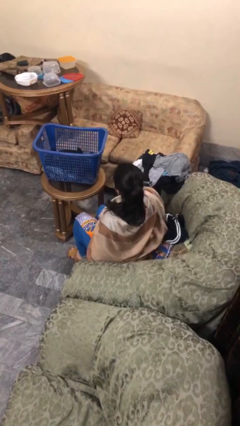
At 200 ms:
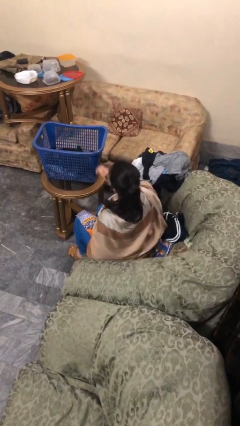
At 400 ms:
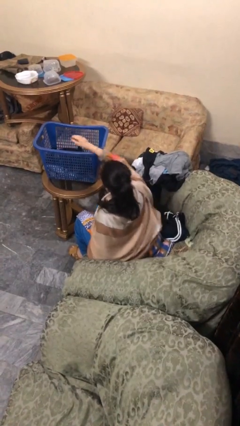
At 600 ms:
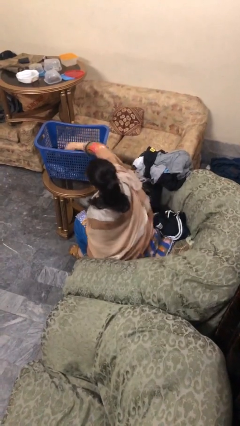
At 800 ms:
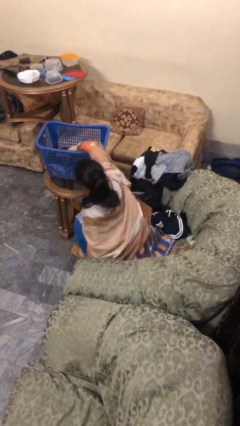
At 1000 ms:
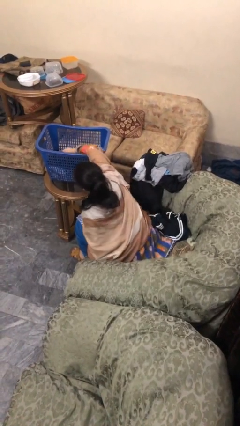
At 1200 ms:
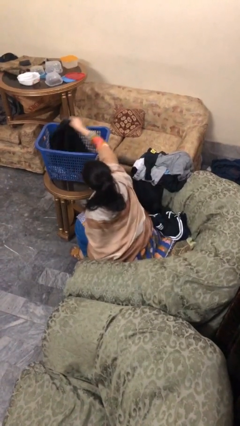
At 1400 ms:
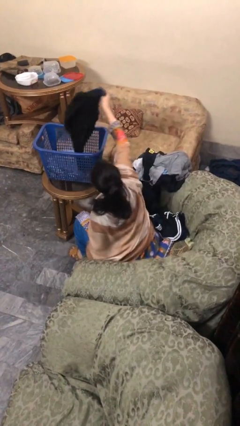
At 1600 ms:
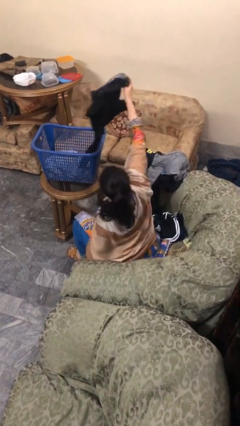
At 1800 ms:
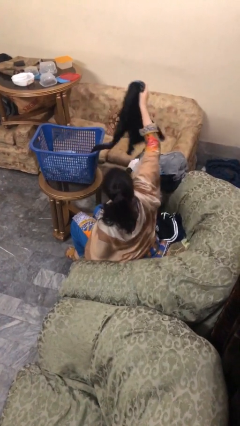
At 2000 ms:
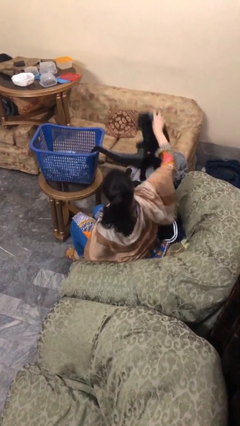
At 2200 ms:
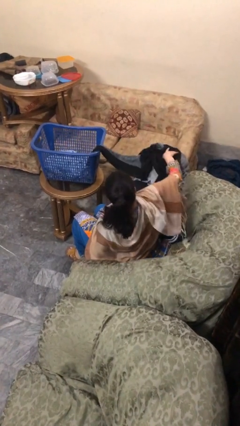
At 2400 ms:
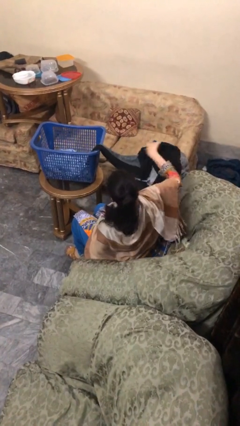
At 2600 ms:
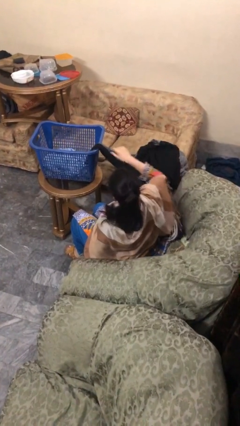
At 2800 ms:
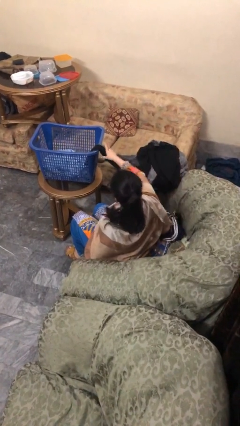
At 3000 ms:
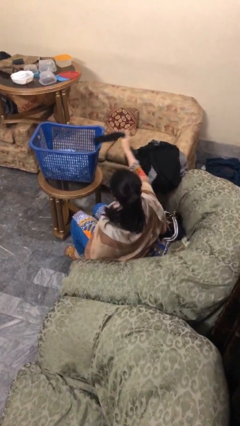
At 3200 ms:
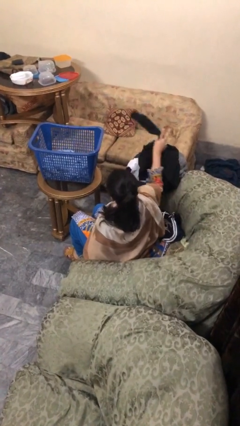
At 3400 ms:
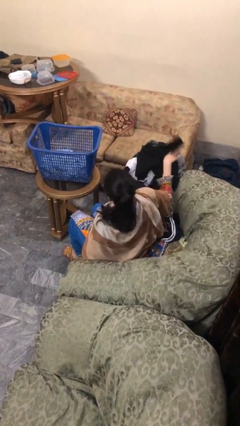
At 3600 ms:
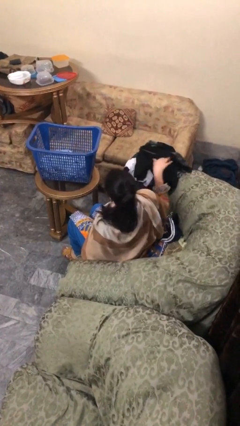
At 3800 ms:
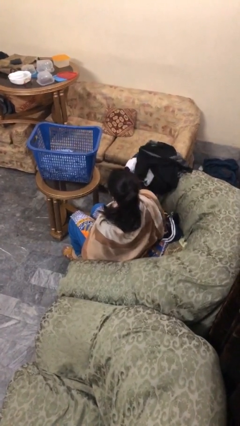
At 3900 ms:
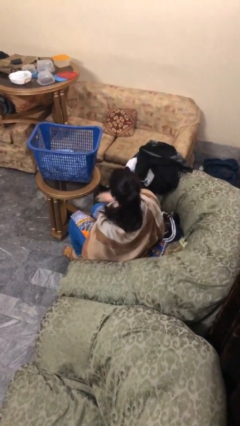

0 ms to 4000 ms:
person takes object from basket

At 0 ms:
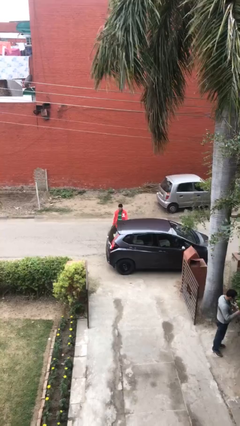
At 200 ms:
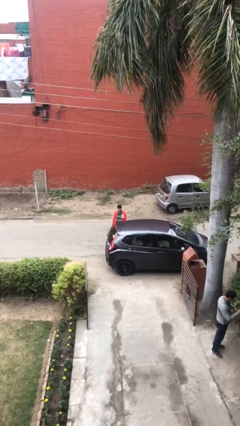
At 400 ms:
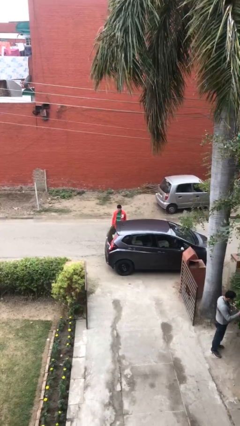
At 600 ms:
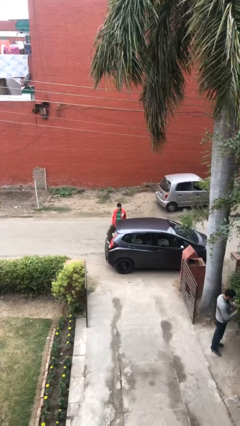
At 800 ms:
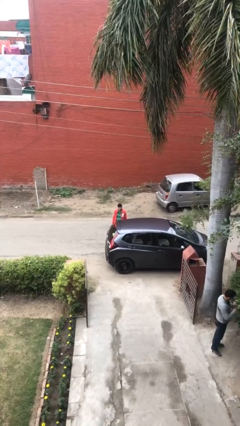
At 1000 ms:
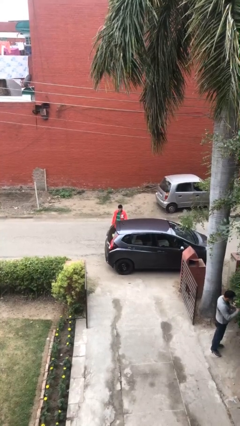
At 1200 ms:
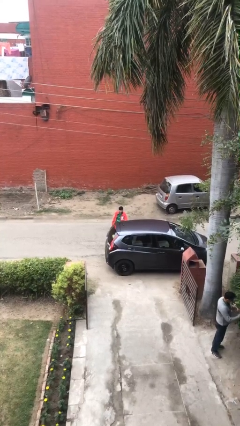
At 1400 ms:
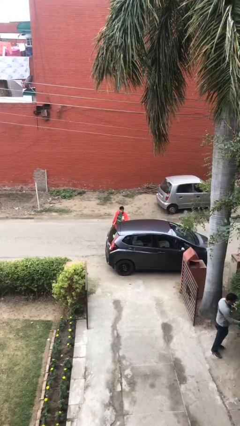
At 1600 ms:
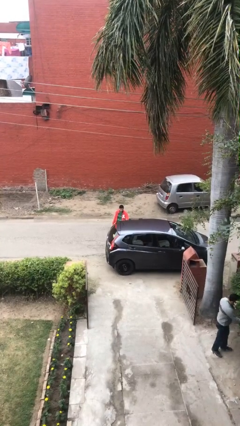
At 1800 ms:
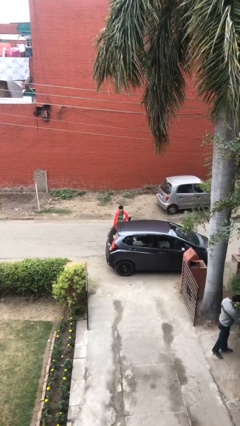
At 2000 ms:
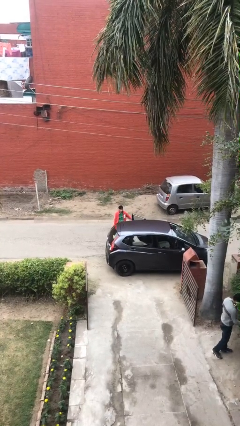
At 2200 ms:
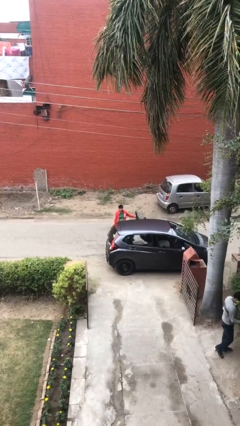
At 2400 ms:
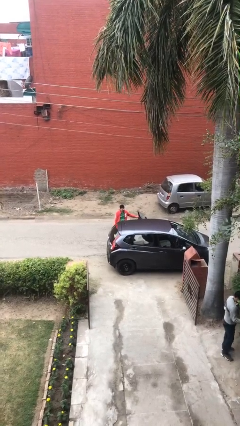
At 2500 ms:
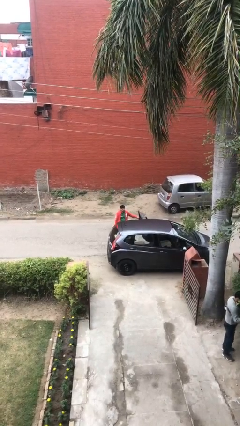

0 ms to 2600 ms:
person opens car door

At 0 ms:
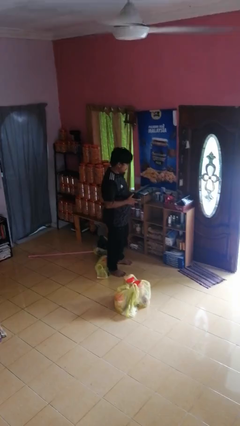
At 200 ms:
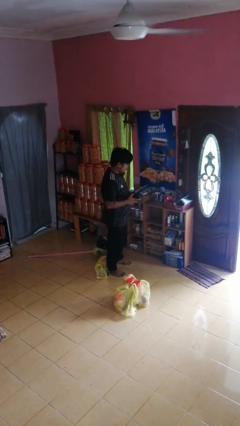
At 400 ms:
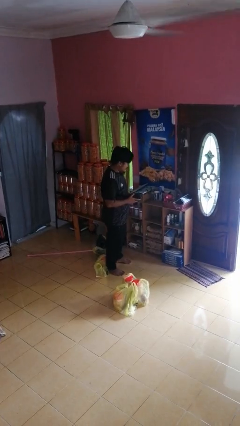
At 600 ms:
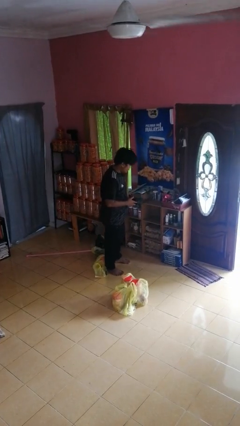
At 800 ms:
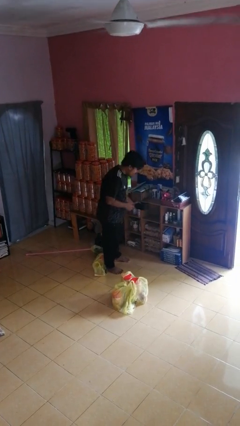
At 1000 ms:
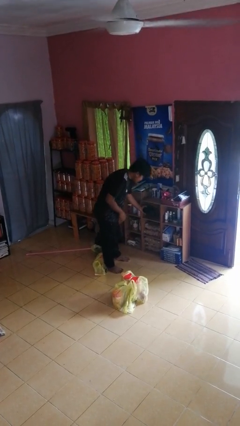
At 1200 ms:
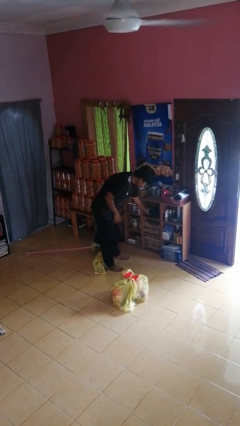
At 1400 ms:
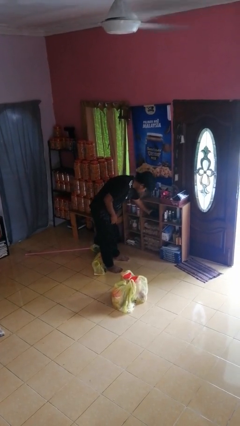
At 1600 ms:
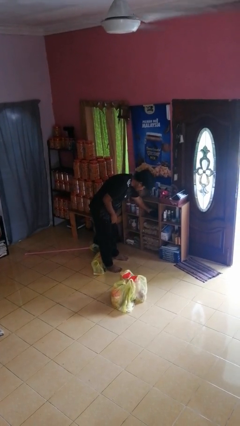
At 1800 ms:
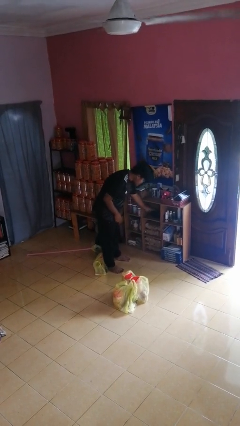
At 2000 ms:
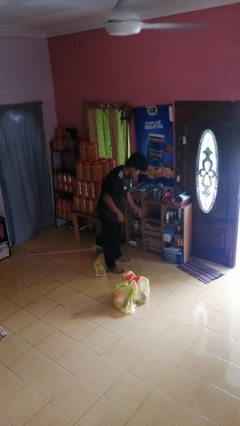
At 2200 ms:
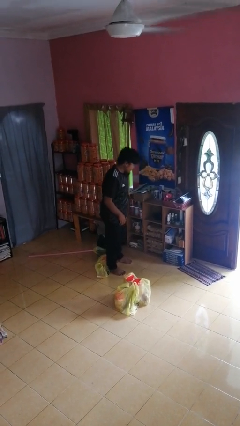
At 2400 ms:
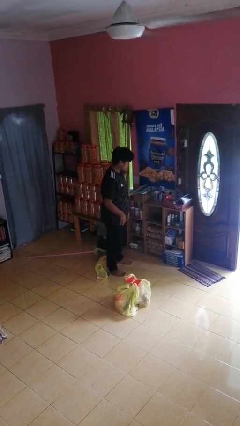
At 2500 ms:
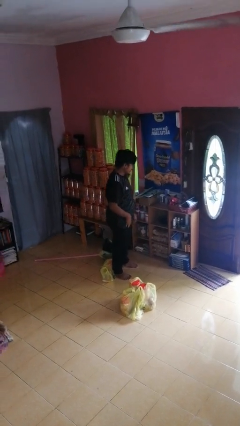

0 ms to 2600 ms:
person puts object in cabinet

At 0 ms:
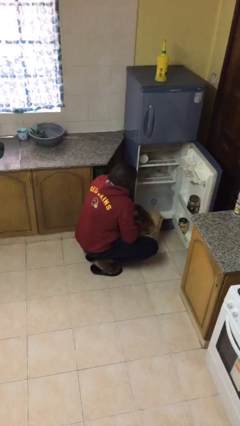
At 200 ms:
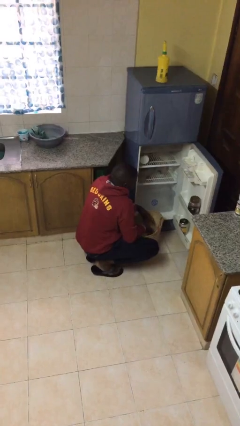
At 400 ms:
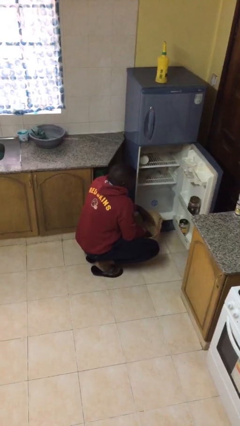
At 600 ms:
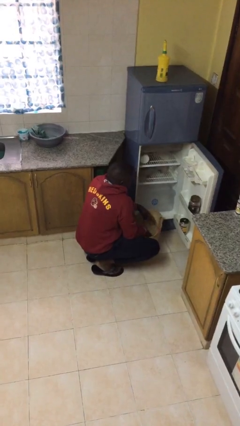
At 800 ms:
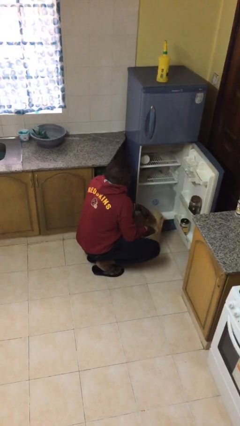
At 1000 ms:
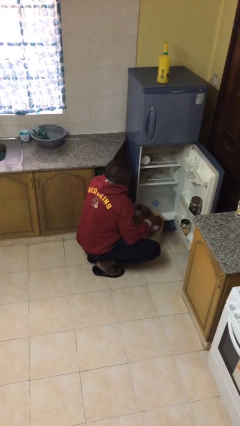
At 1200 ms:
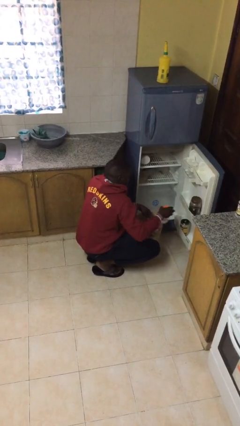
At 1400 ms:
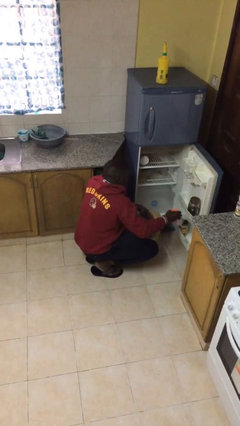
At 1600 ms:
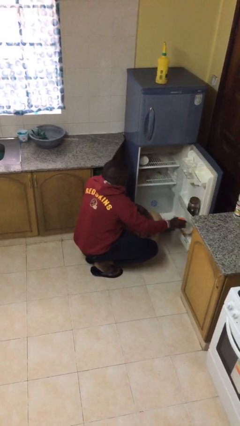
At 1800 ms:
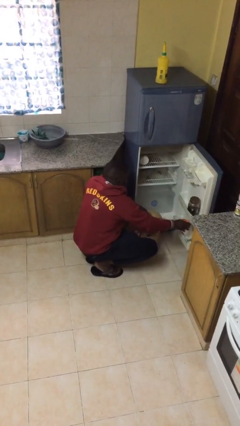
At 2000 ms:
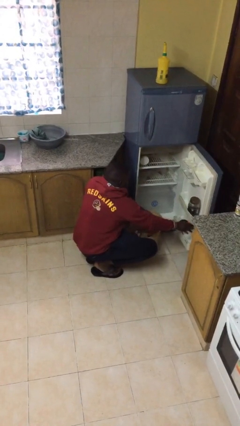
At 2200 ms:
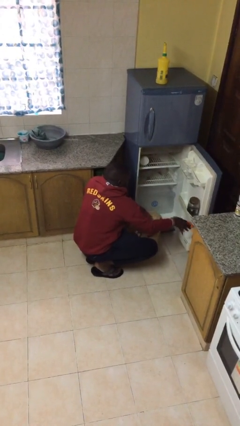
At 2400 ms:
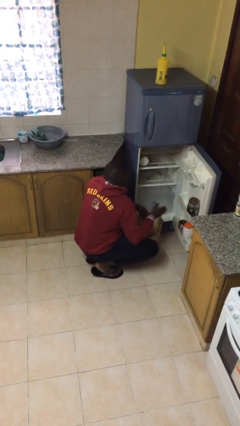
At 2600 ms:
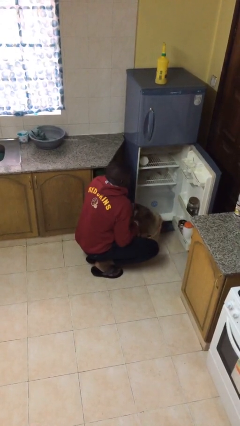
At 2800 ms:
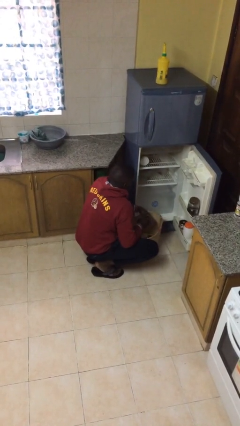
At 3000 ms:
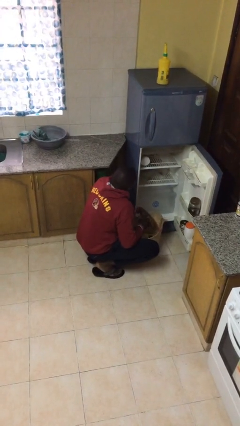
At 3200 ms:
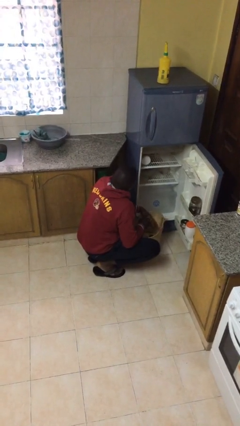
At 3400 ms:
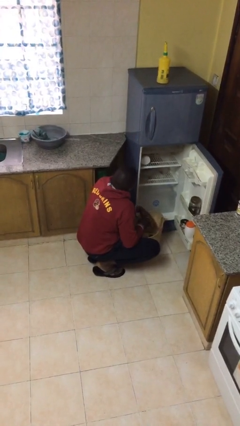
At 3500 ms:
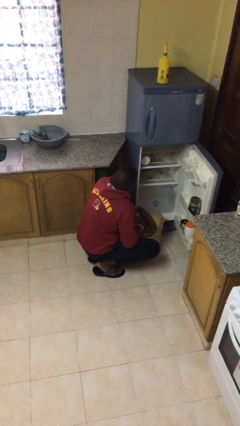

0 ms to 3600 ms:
person loads groceries into refrigerator

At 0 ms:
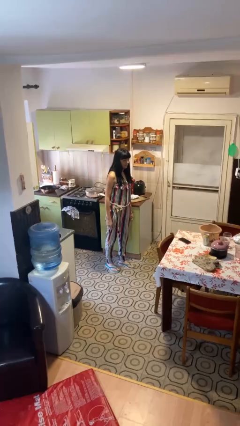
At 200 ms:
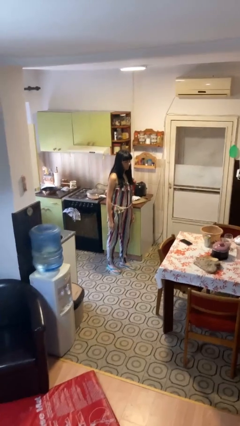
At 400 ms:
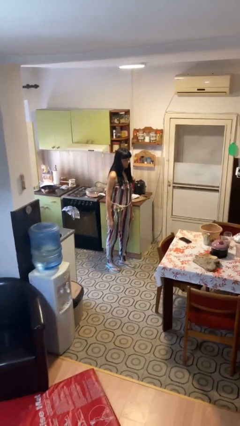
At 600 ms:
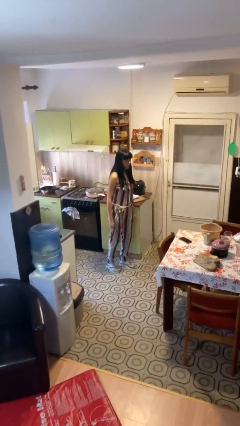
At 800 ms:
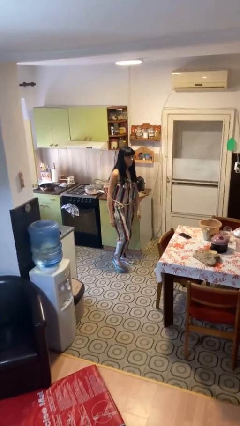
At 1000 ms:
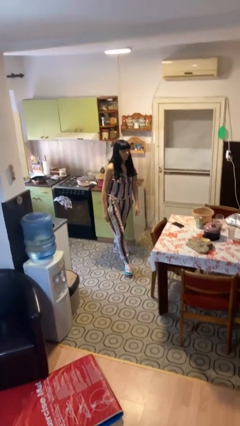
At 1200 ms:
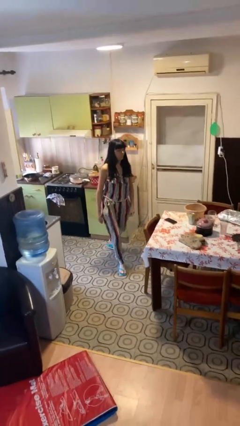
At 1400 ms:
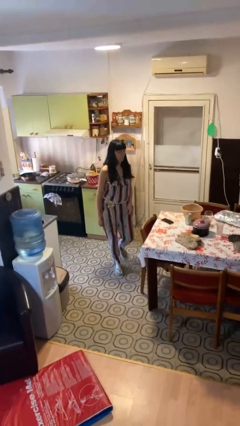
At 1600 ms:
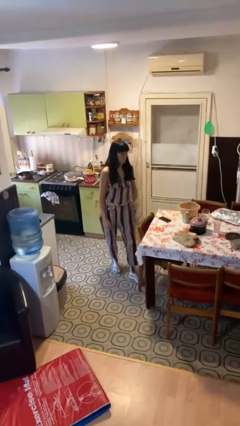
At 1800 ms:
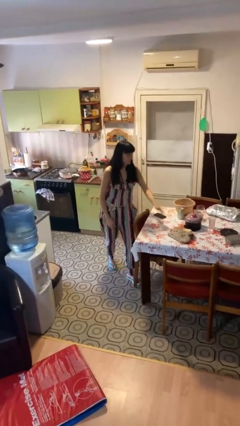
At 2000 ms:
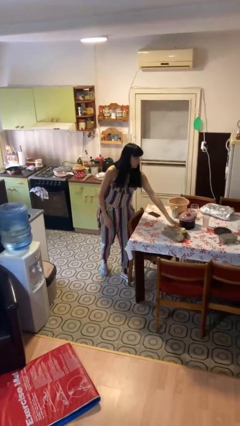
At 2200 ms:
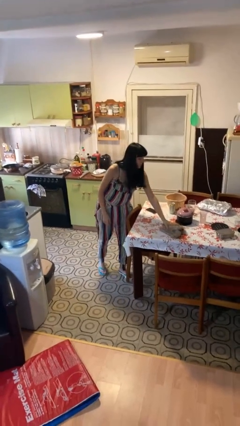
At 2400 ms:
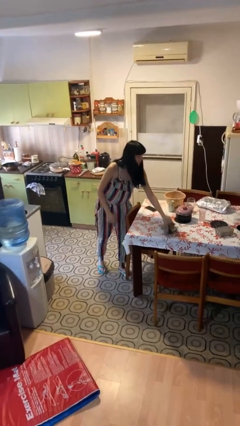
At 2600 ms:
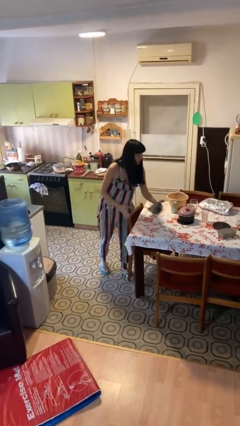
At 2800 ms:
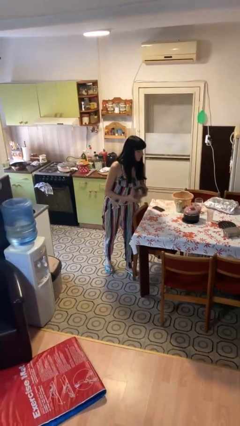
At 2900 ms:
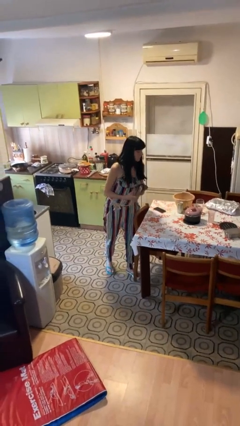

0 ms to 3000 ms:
person picks up object from table

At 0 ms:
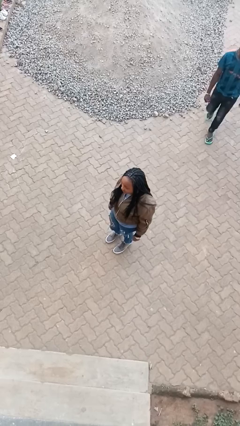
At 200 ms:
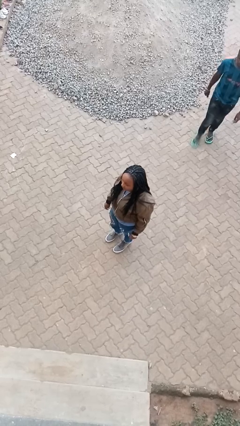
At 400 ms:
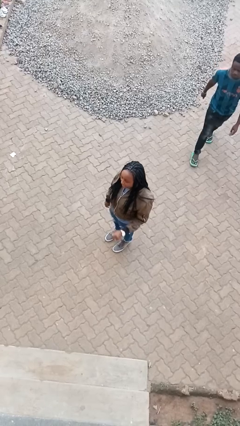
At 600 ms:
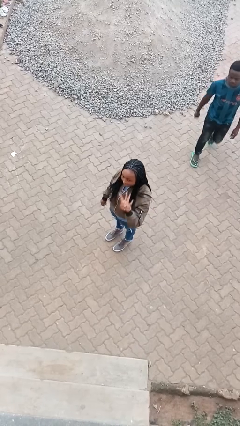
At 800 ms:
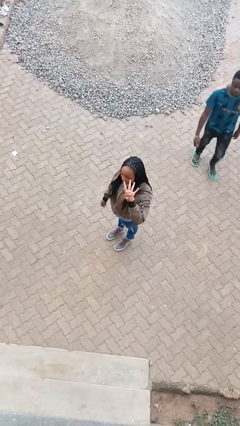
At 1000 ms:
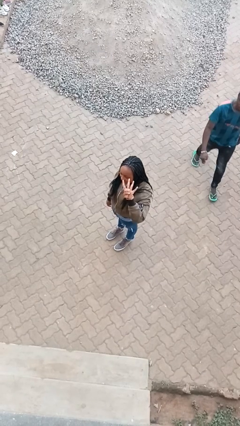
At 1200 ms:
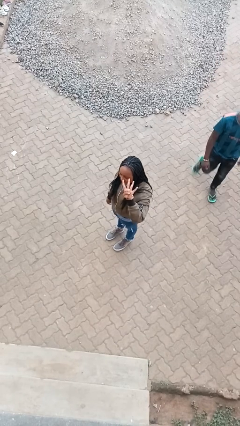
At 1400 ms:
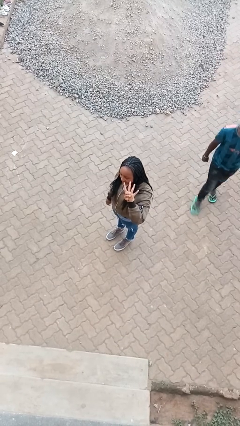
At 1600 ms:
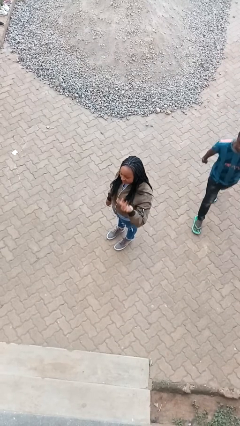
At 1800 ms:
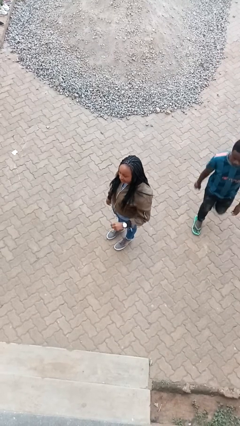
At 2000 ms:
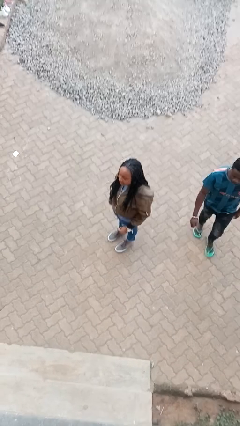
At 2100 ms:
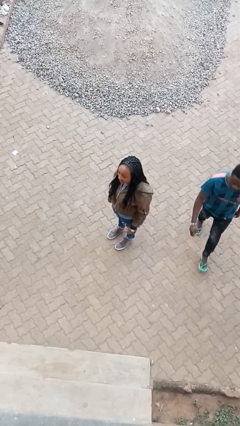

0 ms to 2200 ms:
person gestures number four
